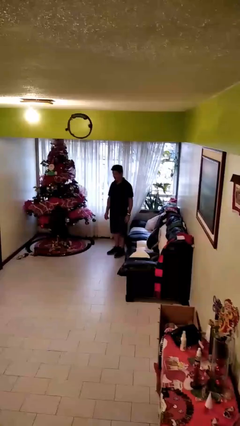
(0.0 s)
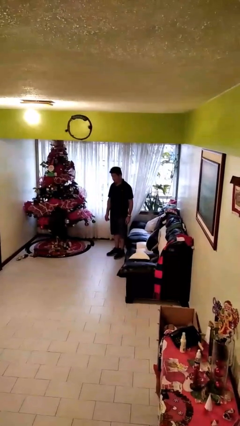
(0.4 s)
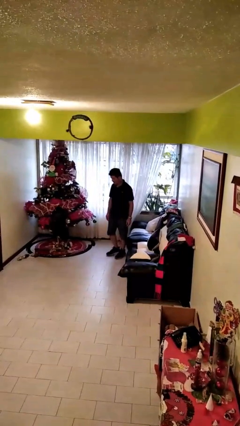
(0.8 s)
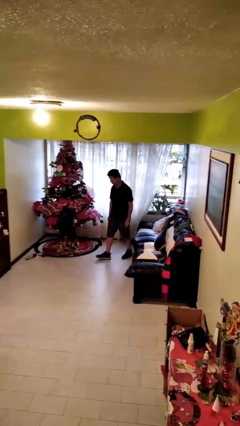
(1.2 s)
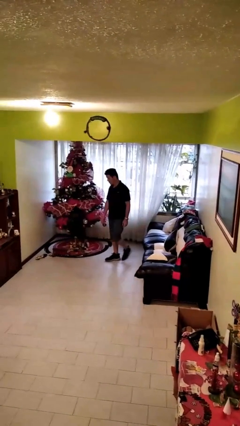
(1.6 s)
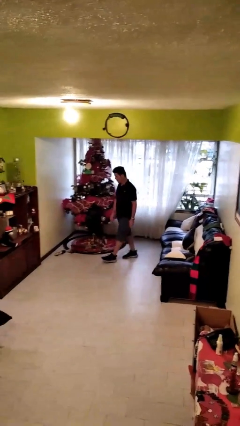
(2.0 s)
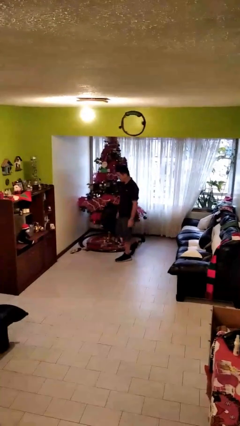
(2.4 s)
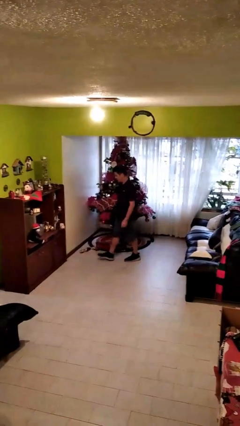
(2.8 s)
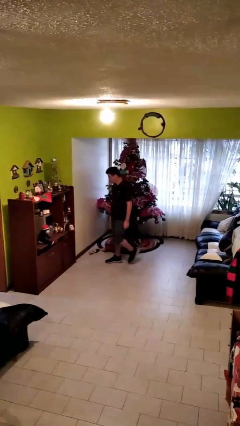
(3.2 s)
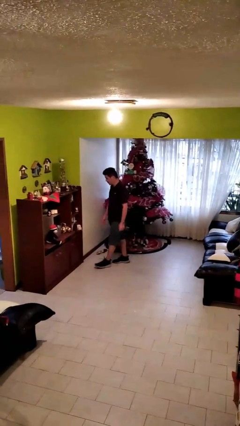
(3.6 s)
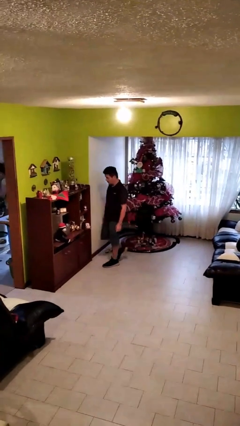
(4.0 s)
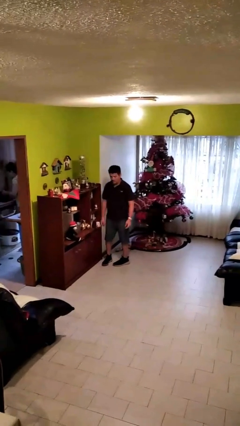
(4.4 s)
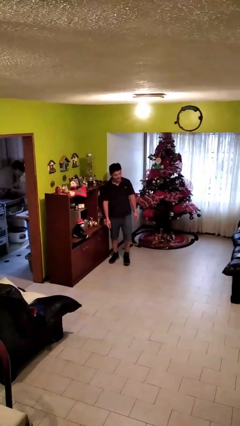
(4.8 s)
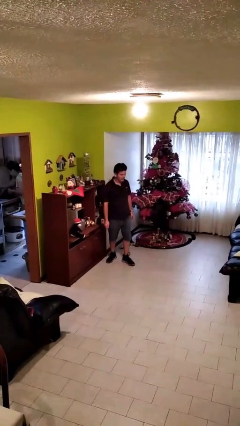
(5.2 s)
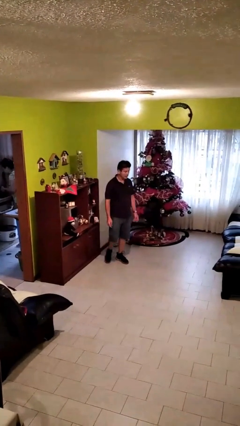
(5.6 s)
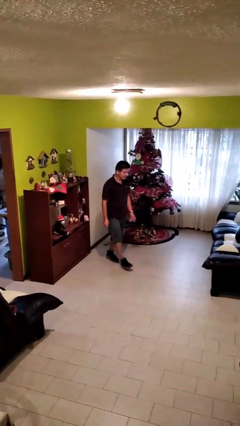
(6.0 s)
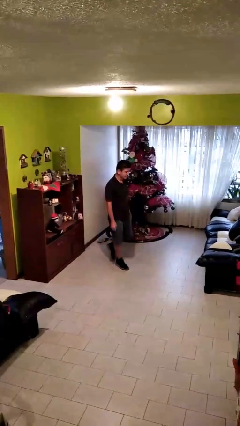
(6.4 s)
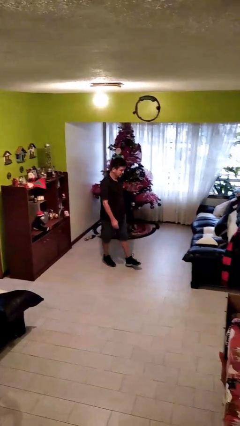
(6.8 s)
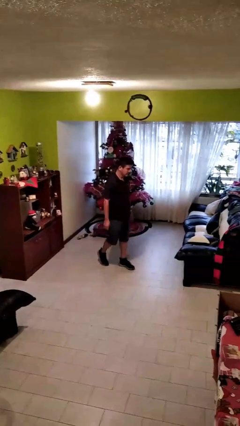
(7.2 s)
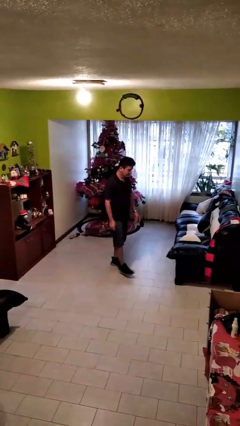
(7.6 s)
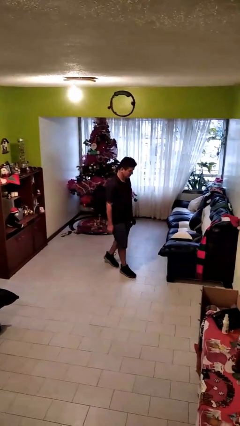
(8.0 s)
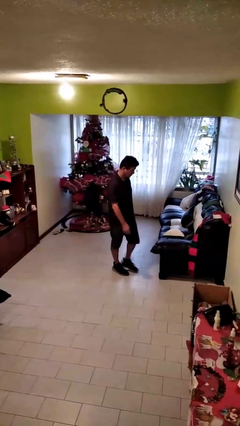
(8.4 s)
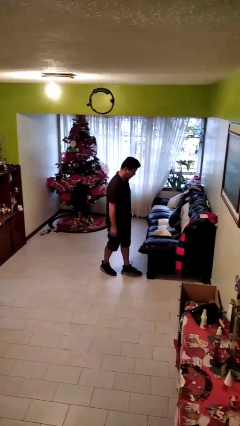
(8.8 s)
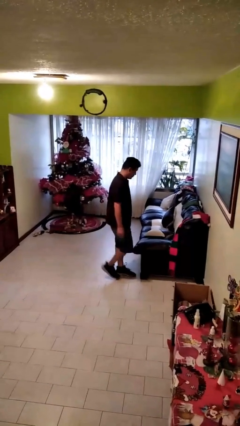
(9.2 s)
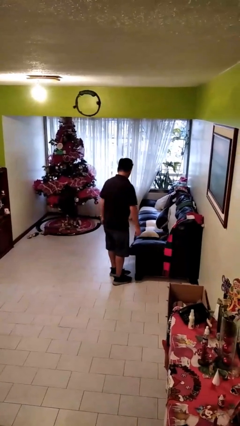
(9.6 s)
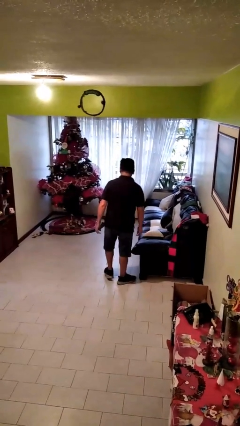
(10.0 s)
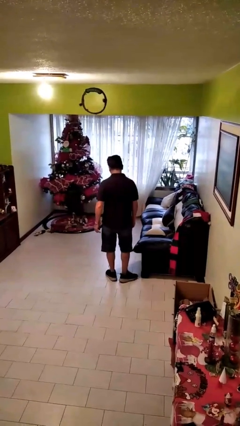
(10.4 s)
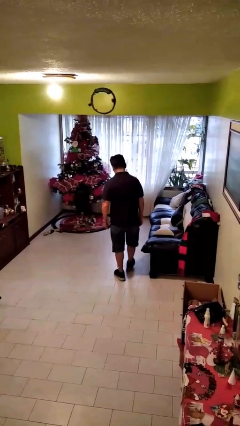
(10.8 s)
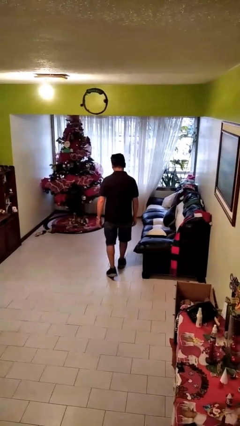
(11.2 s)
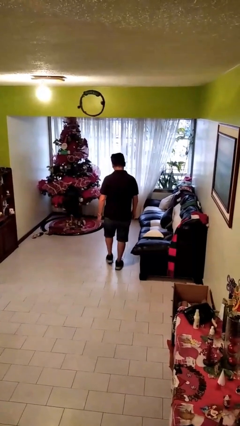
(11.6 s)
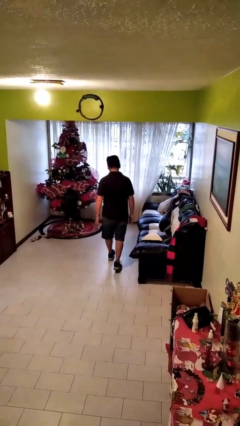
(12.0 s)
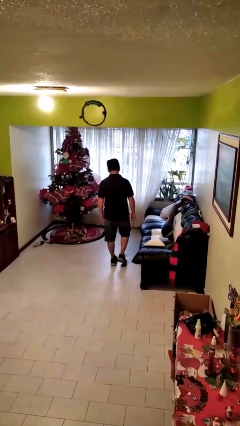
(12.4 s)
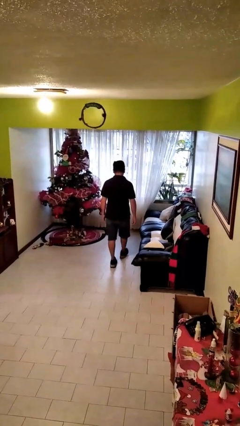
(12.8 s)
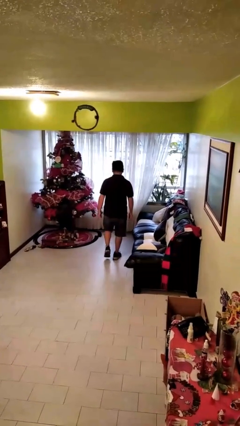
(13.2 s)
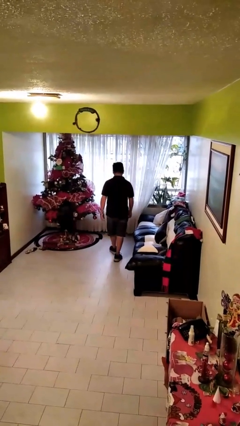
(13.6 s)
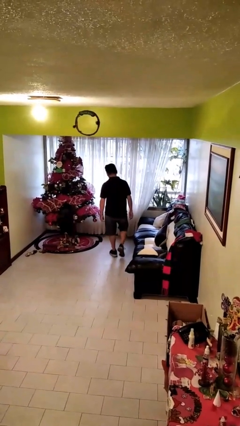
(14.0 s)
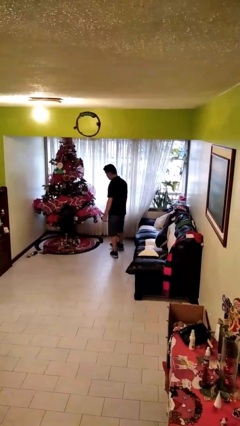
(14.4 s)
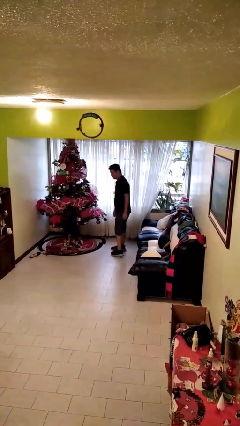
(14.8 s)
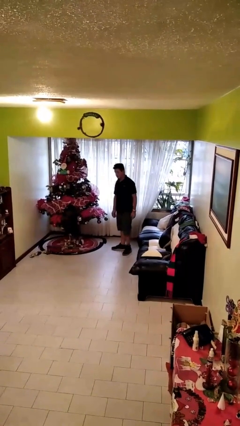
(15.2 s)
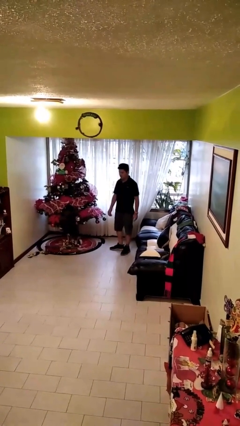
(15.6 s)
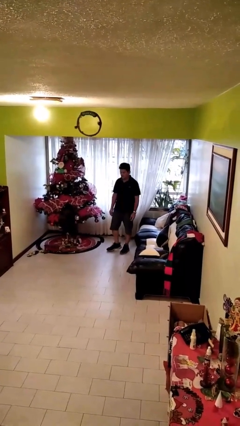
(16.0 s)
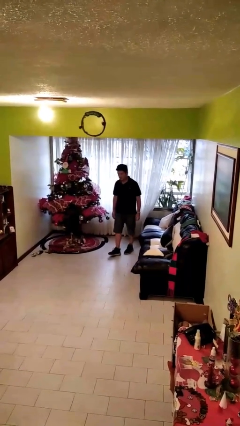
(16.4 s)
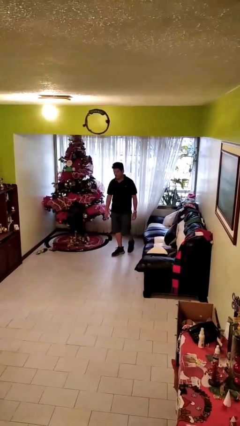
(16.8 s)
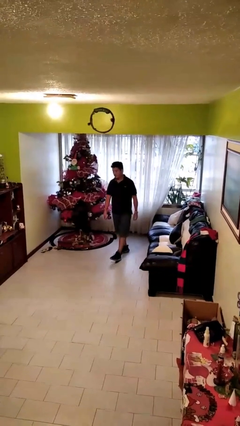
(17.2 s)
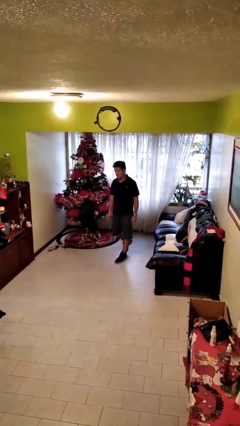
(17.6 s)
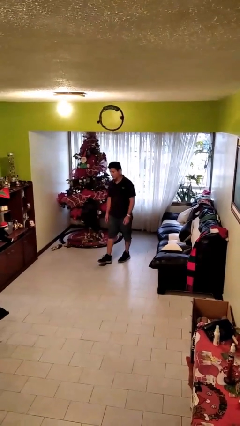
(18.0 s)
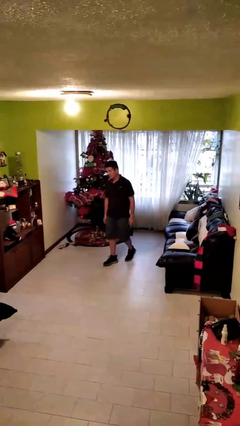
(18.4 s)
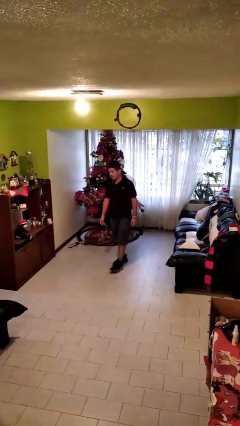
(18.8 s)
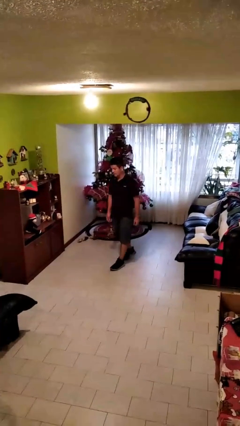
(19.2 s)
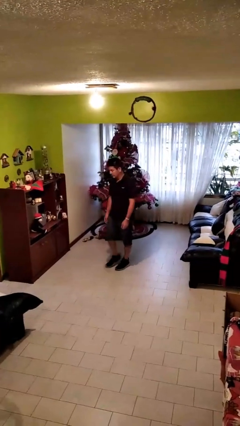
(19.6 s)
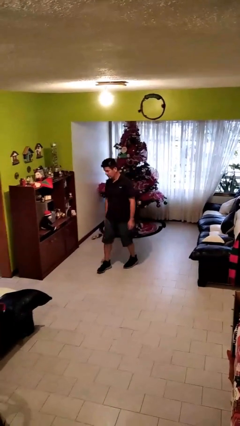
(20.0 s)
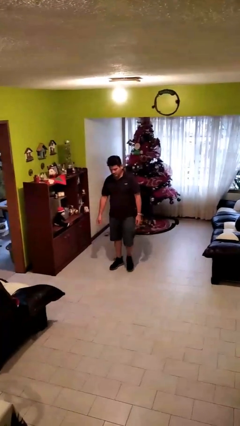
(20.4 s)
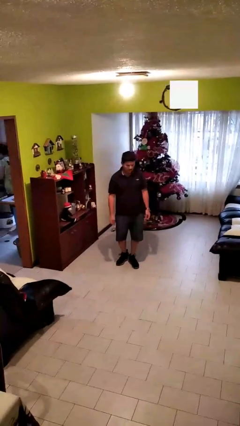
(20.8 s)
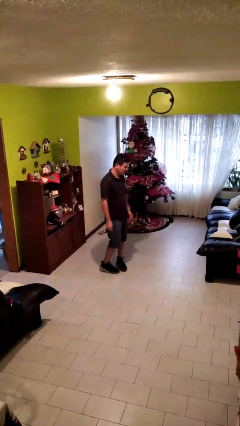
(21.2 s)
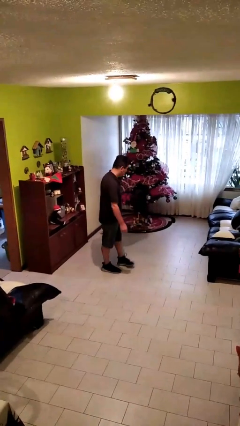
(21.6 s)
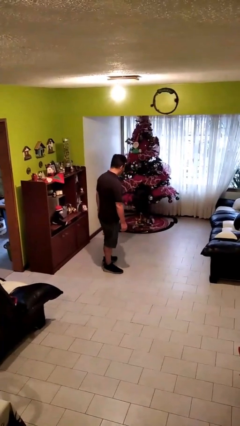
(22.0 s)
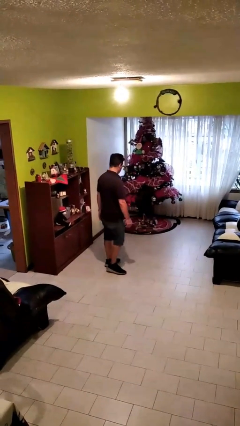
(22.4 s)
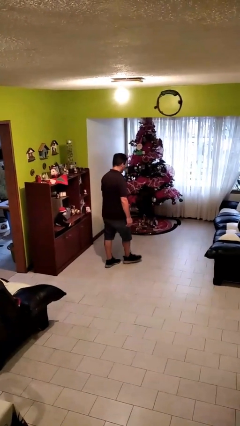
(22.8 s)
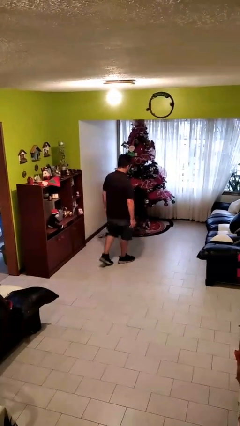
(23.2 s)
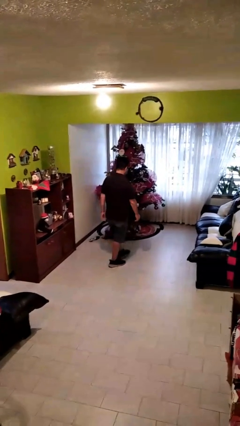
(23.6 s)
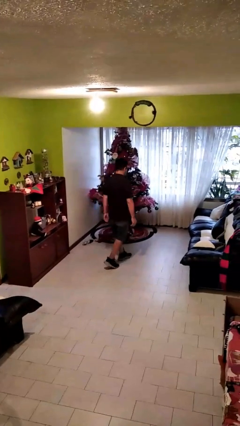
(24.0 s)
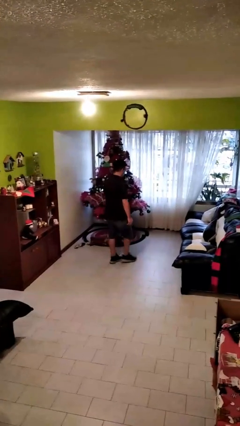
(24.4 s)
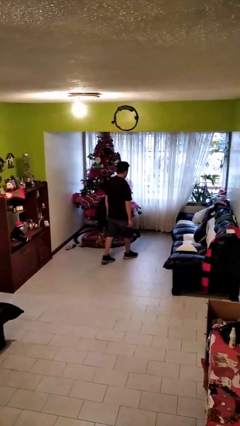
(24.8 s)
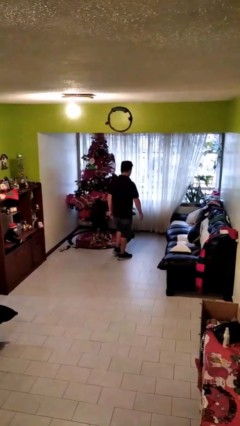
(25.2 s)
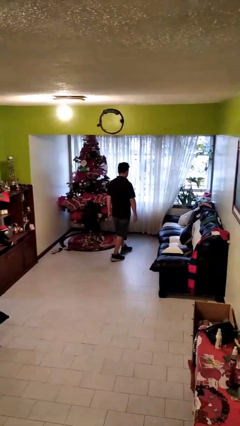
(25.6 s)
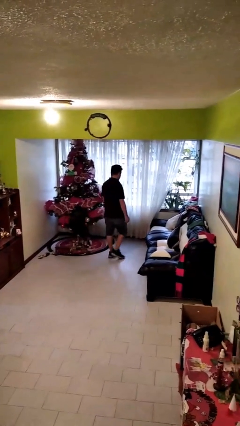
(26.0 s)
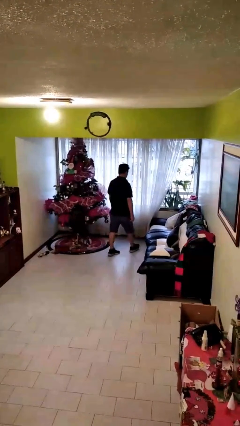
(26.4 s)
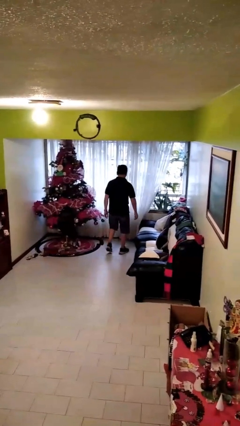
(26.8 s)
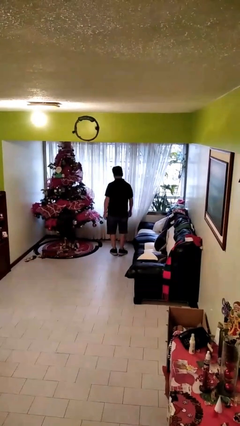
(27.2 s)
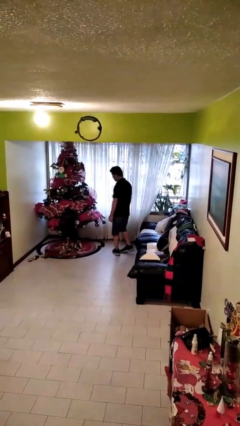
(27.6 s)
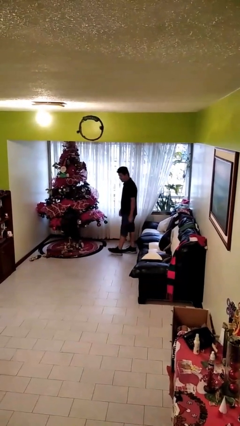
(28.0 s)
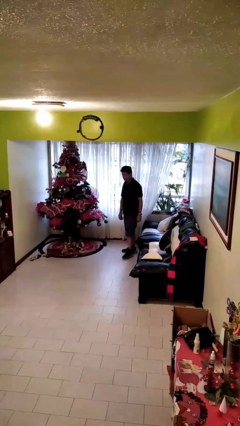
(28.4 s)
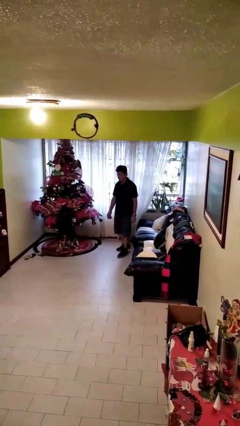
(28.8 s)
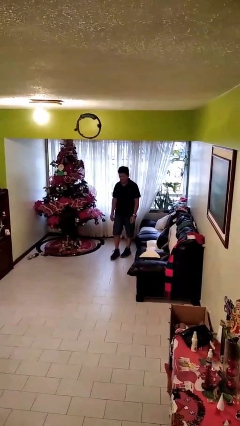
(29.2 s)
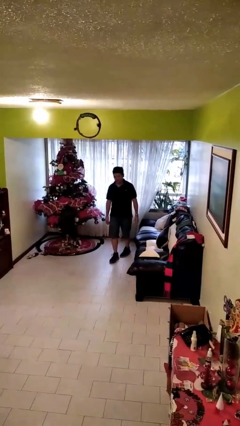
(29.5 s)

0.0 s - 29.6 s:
person walks

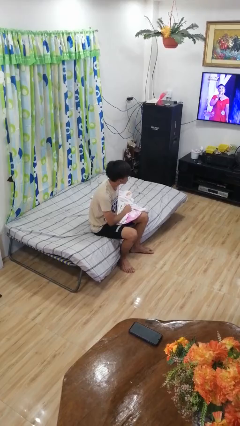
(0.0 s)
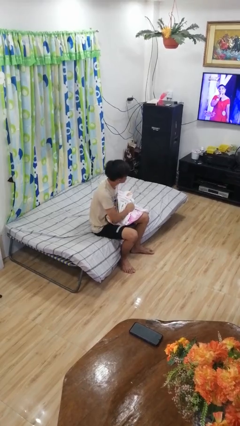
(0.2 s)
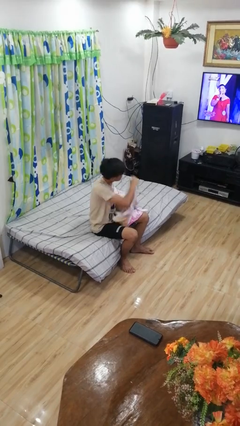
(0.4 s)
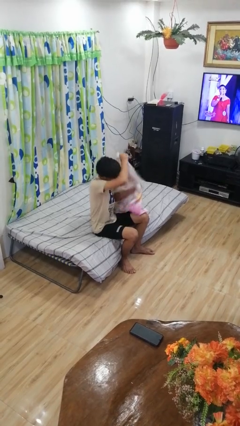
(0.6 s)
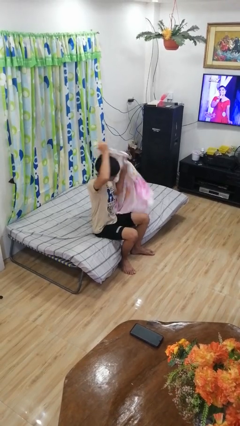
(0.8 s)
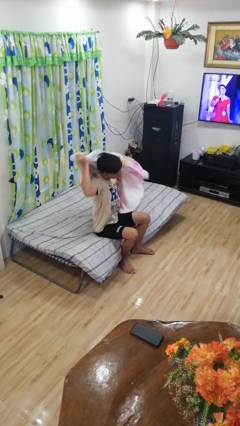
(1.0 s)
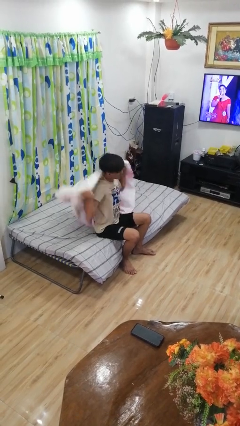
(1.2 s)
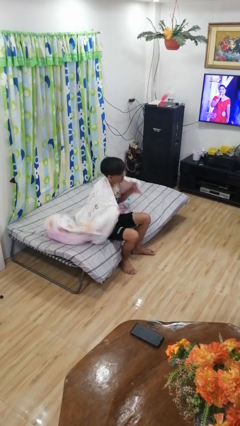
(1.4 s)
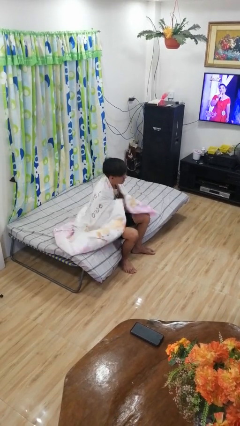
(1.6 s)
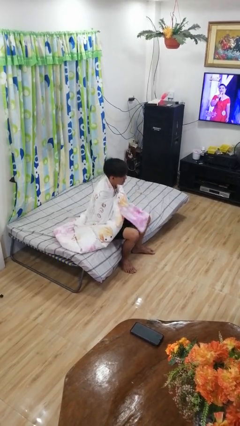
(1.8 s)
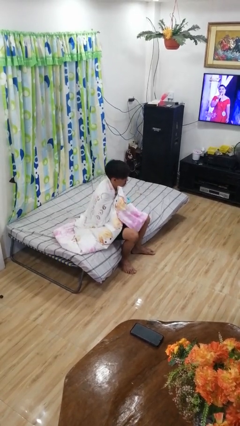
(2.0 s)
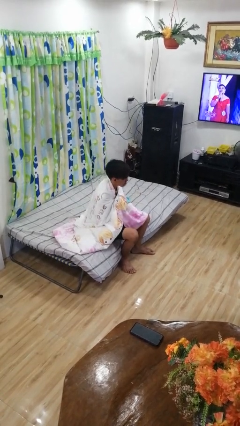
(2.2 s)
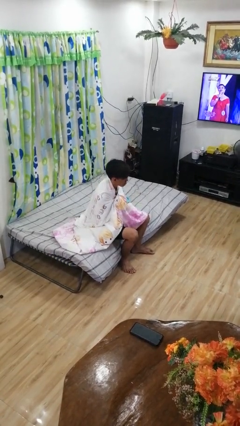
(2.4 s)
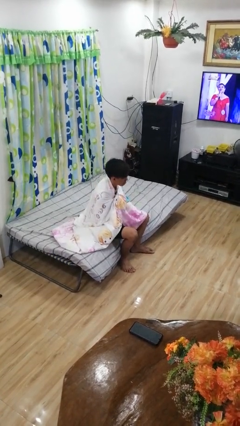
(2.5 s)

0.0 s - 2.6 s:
person covers with blanket
